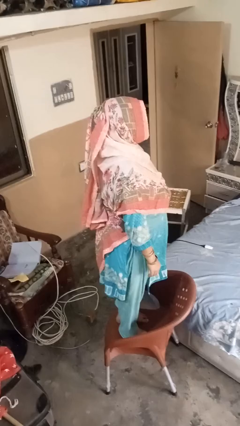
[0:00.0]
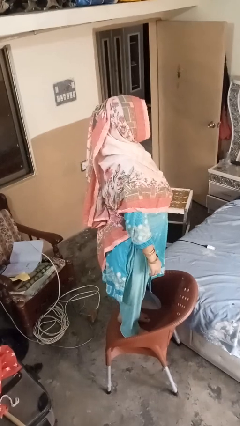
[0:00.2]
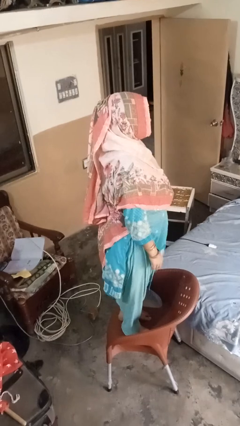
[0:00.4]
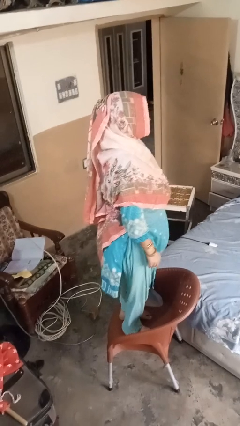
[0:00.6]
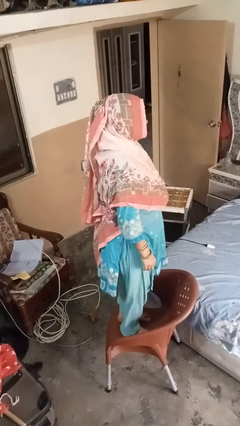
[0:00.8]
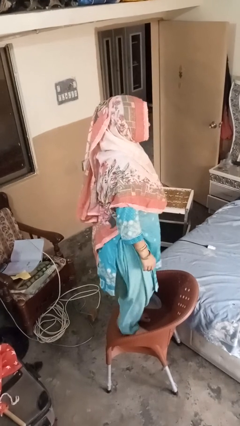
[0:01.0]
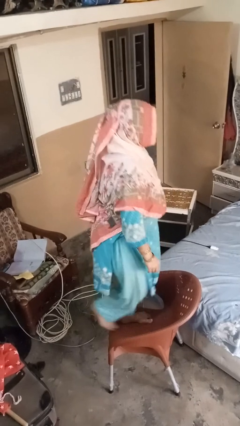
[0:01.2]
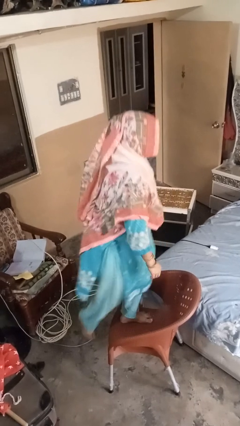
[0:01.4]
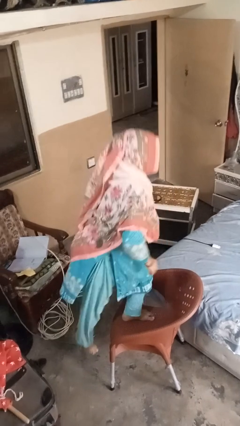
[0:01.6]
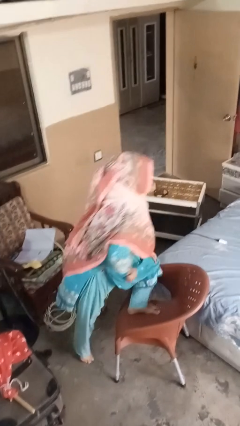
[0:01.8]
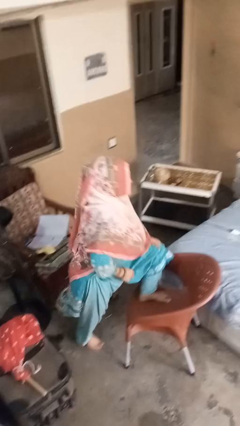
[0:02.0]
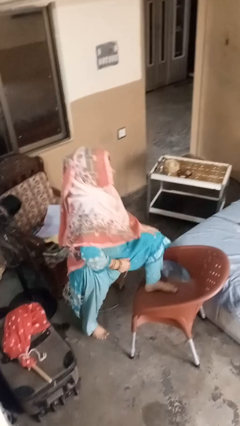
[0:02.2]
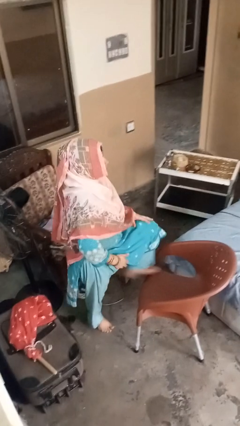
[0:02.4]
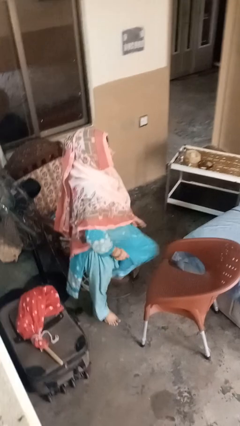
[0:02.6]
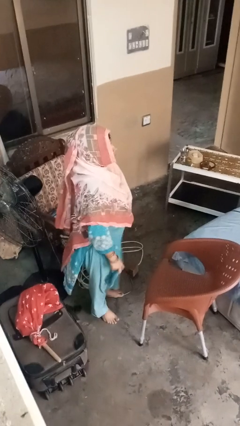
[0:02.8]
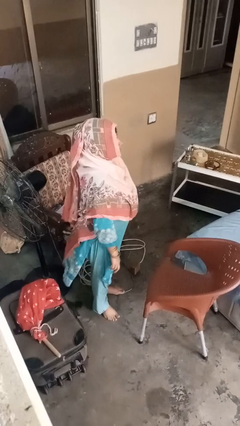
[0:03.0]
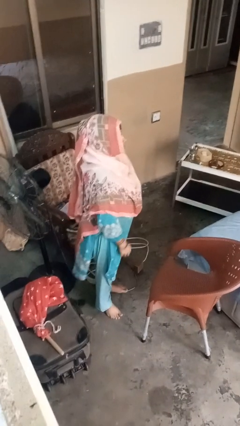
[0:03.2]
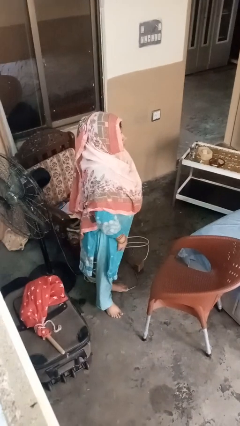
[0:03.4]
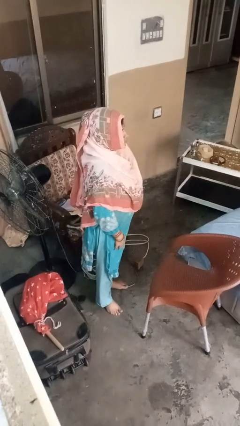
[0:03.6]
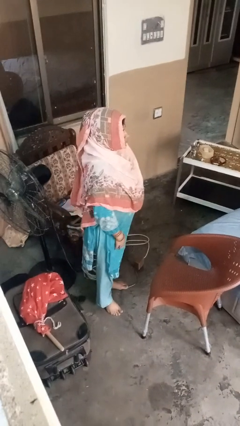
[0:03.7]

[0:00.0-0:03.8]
person climbs off chair

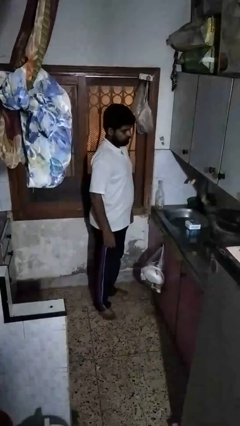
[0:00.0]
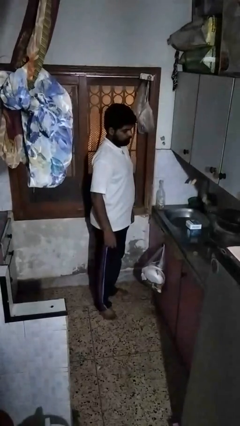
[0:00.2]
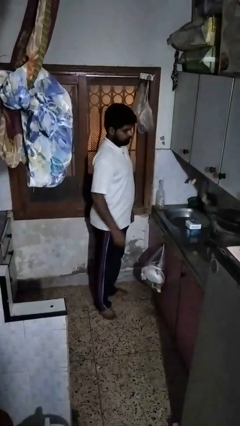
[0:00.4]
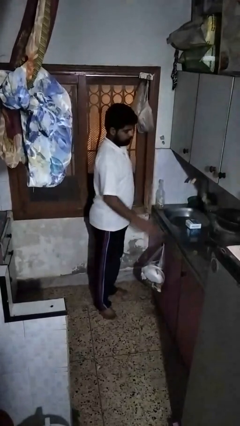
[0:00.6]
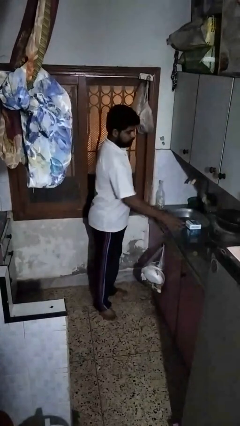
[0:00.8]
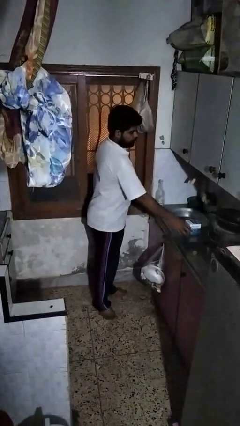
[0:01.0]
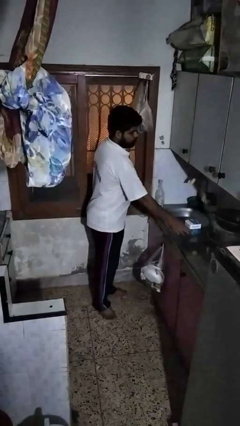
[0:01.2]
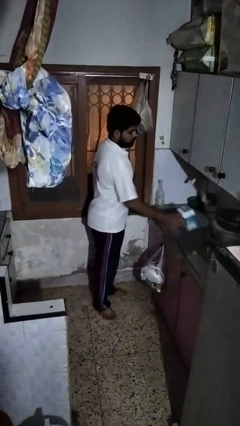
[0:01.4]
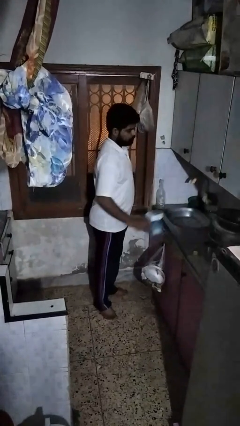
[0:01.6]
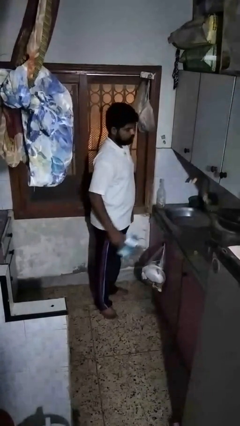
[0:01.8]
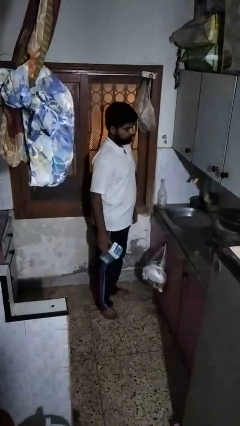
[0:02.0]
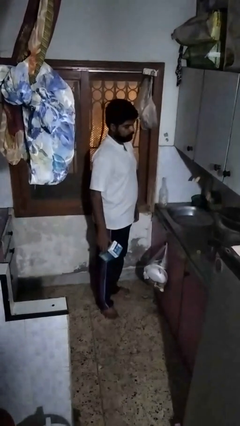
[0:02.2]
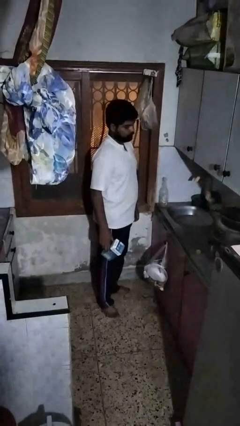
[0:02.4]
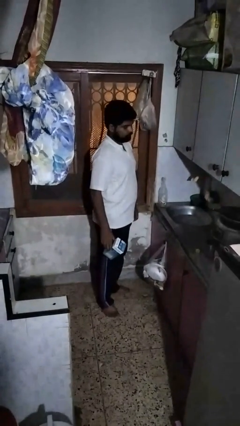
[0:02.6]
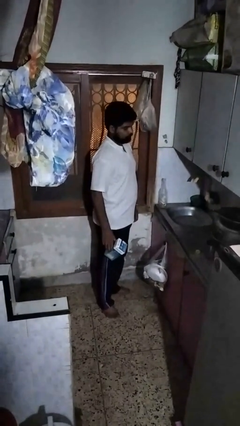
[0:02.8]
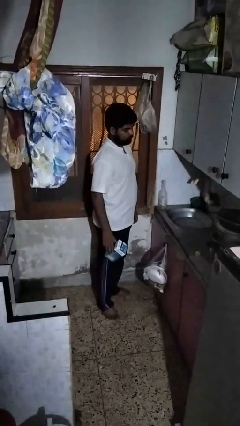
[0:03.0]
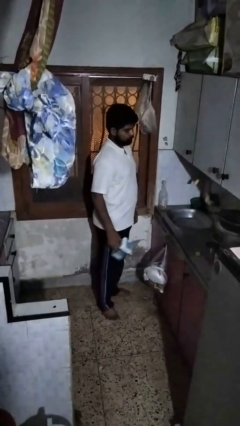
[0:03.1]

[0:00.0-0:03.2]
person picks up object from countertop

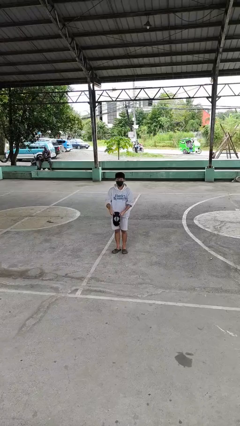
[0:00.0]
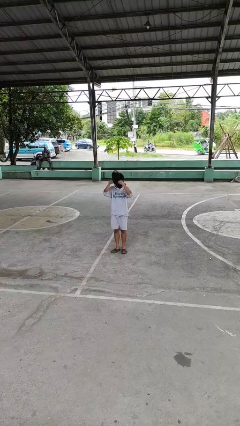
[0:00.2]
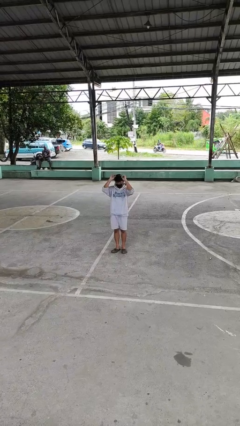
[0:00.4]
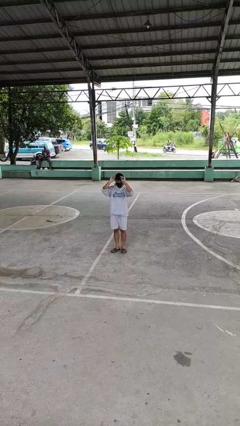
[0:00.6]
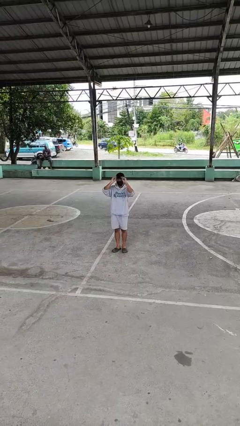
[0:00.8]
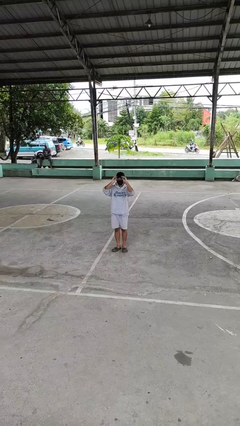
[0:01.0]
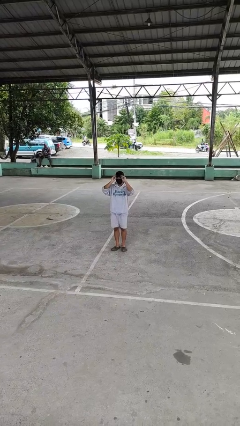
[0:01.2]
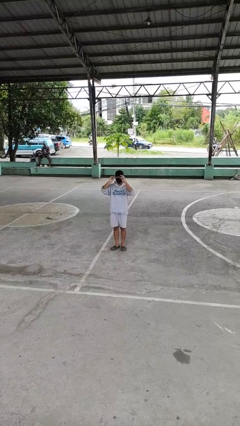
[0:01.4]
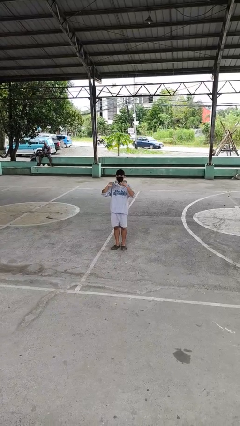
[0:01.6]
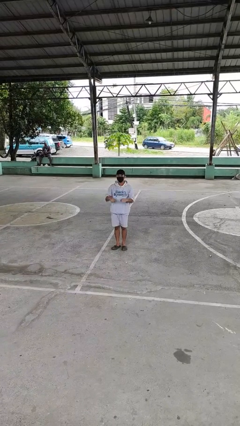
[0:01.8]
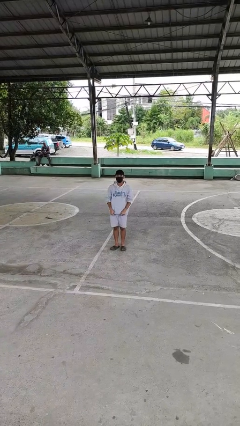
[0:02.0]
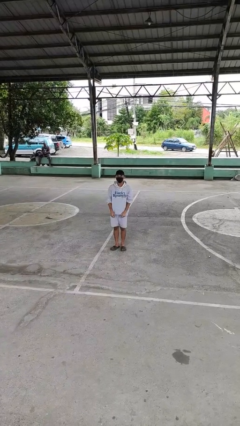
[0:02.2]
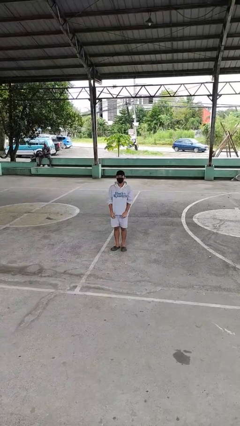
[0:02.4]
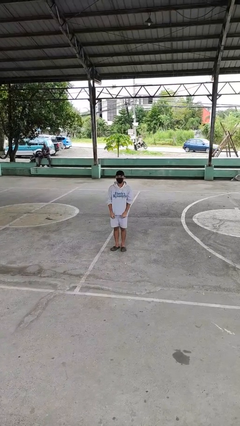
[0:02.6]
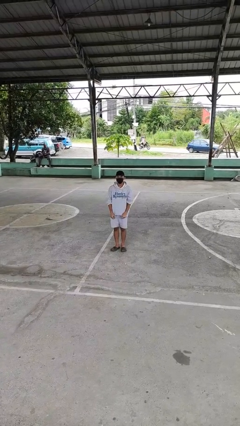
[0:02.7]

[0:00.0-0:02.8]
person puts on hat

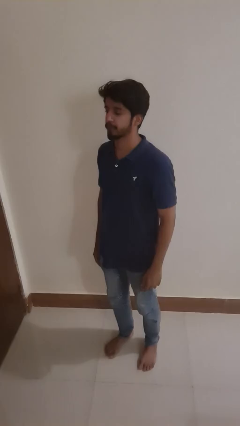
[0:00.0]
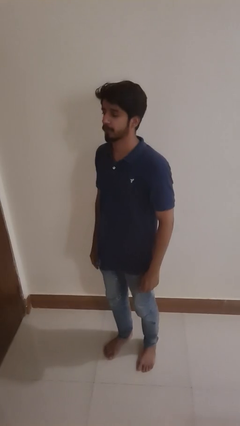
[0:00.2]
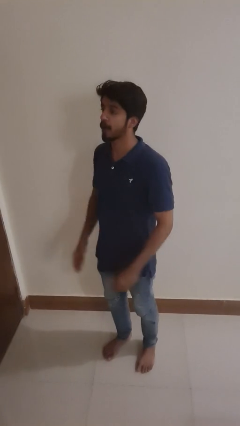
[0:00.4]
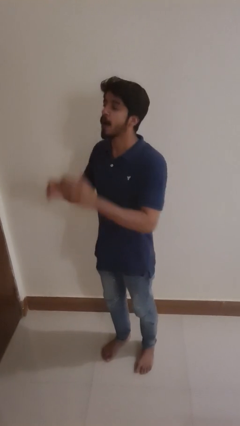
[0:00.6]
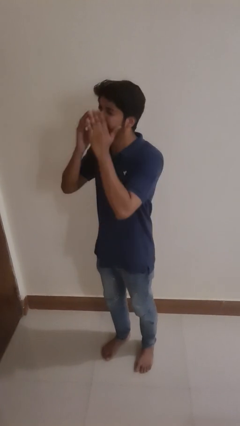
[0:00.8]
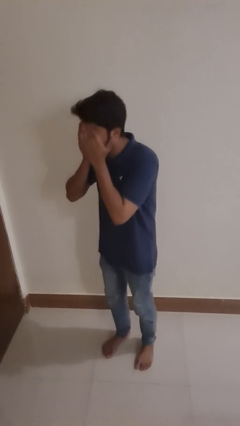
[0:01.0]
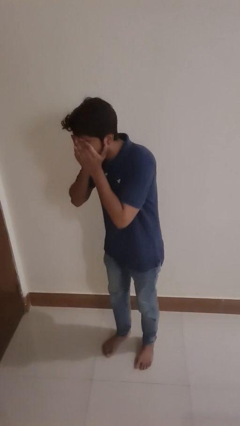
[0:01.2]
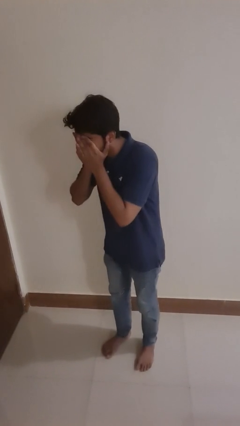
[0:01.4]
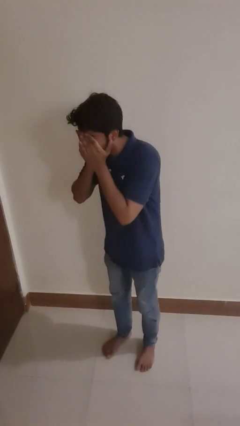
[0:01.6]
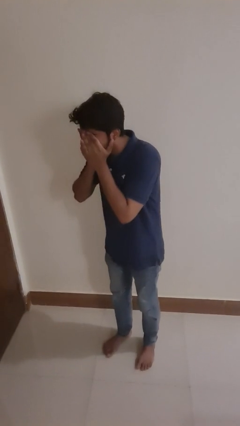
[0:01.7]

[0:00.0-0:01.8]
person sneezes into hand

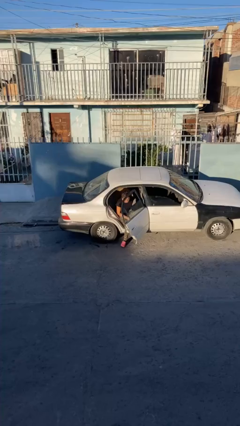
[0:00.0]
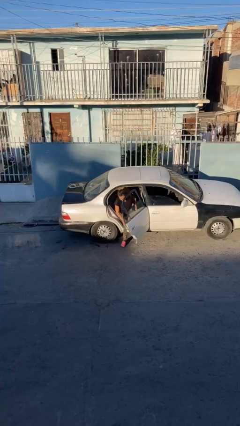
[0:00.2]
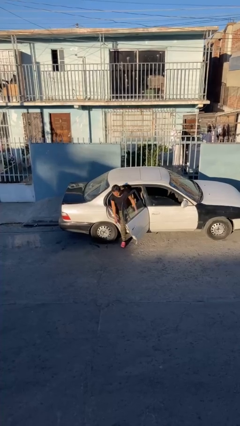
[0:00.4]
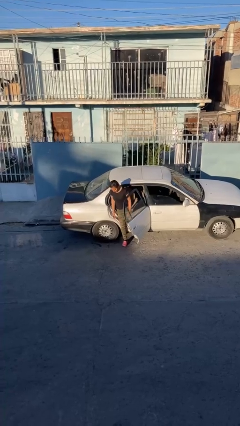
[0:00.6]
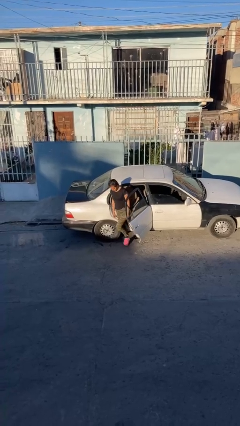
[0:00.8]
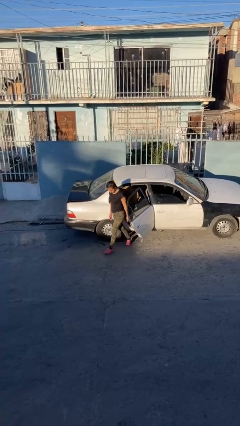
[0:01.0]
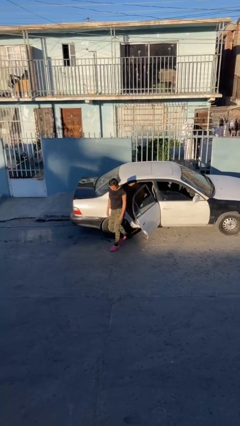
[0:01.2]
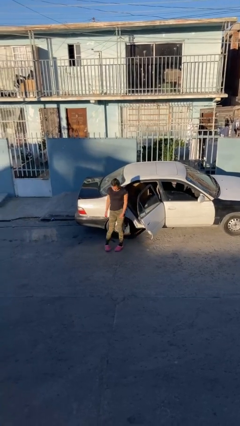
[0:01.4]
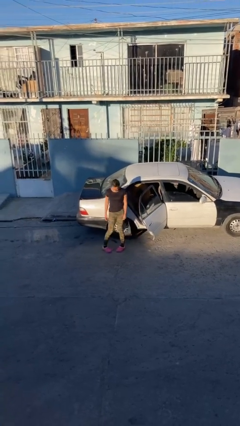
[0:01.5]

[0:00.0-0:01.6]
person exits car

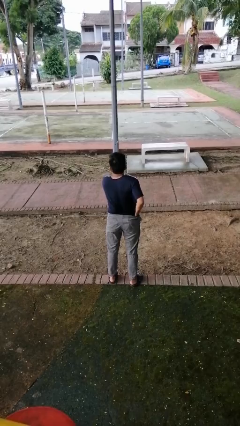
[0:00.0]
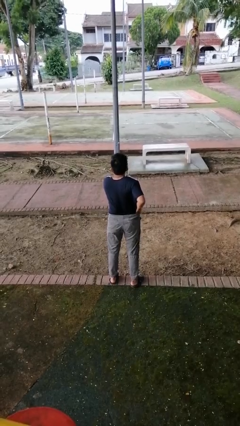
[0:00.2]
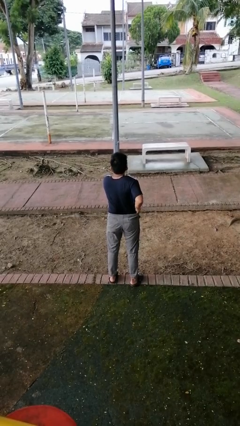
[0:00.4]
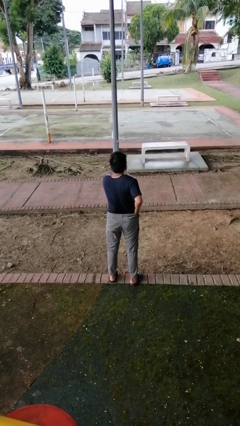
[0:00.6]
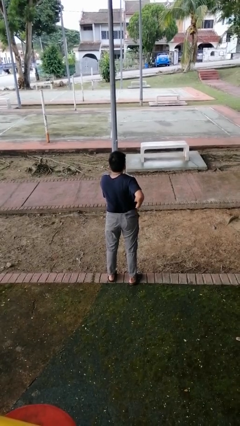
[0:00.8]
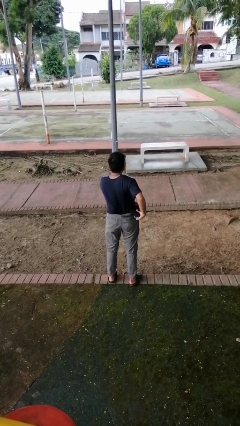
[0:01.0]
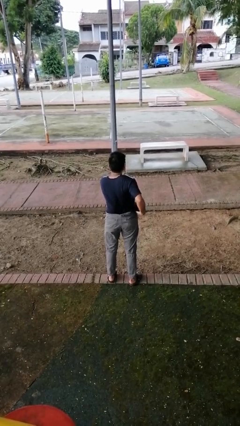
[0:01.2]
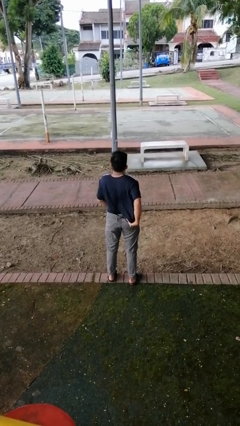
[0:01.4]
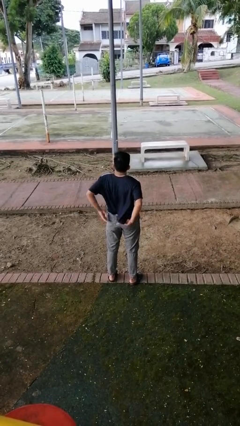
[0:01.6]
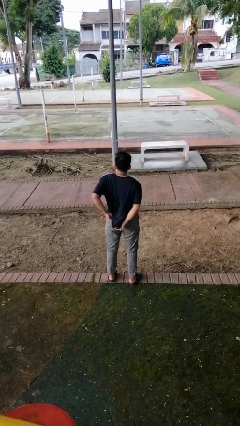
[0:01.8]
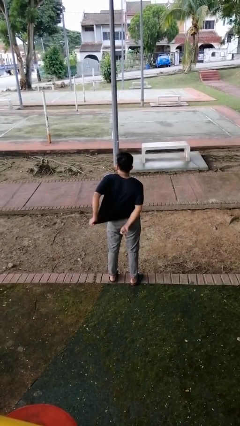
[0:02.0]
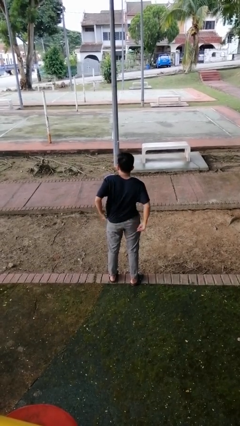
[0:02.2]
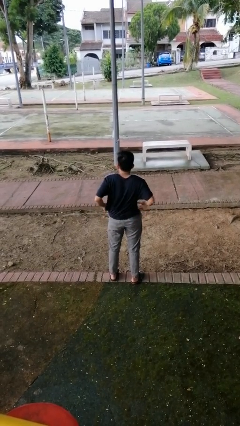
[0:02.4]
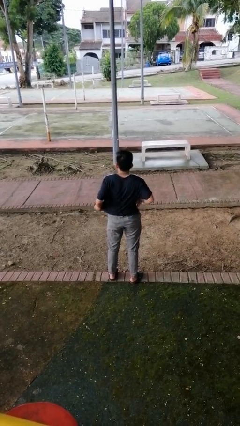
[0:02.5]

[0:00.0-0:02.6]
person untucks shirt

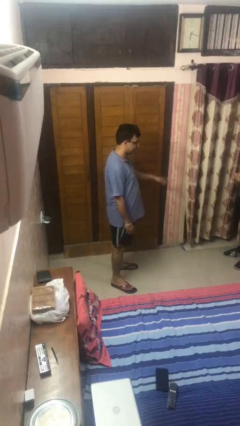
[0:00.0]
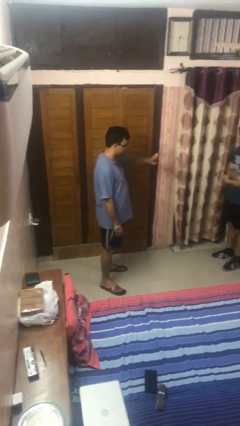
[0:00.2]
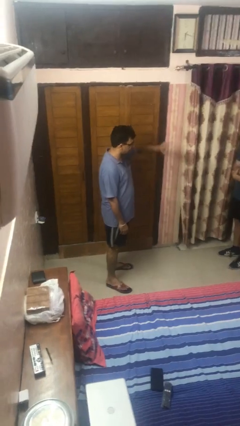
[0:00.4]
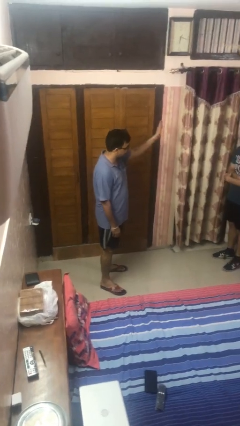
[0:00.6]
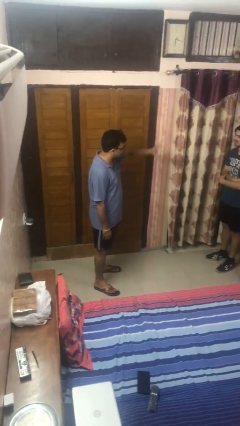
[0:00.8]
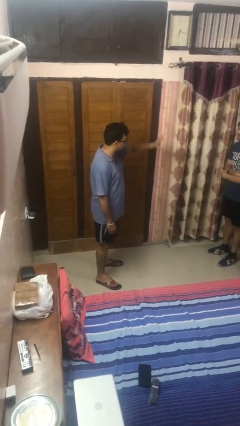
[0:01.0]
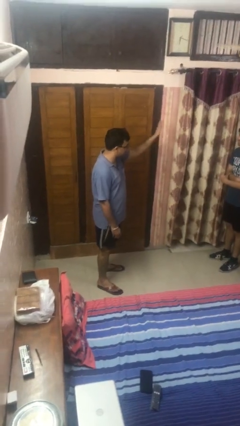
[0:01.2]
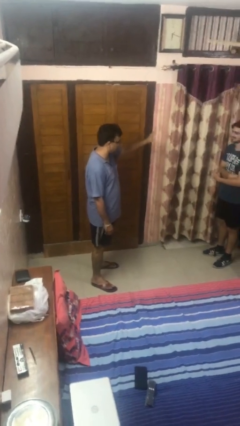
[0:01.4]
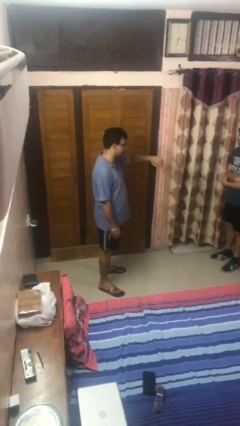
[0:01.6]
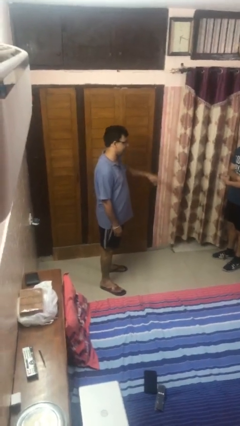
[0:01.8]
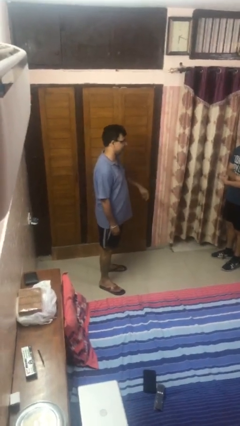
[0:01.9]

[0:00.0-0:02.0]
person waves at person
